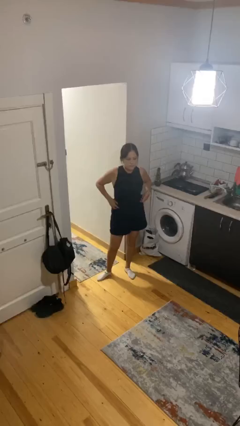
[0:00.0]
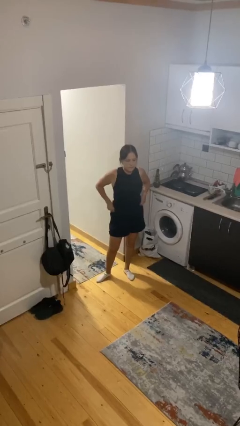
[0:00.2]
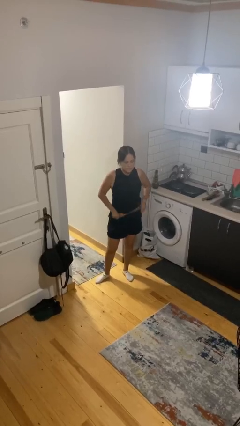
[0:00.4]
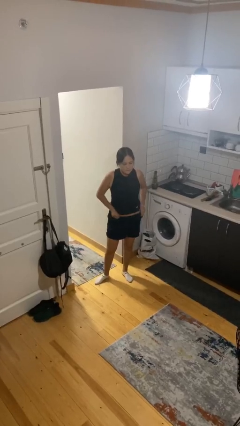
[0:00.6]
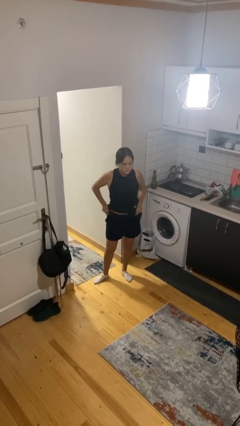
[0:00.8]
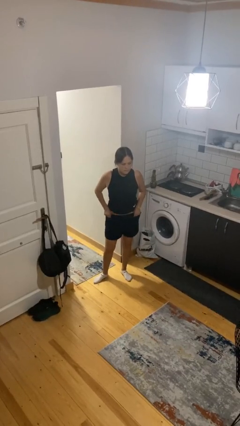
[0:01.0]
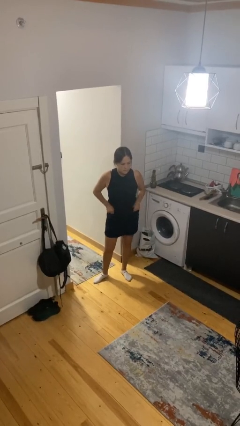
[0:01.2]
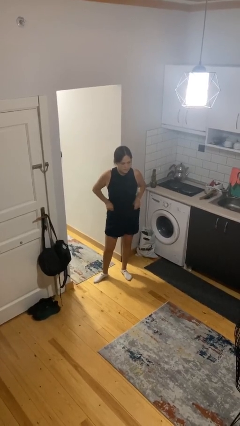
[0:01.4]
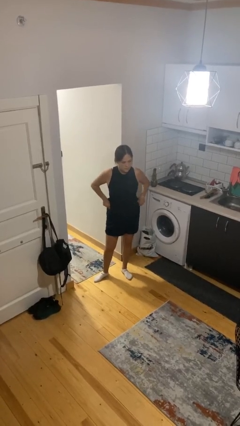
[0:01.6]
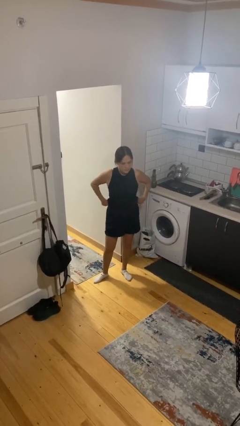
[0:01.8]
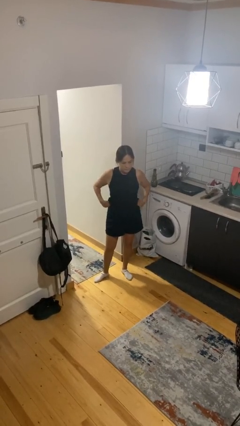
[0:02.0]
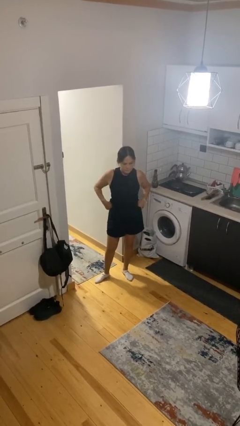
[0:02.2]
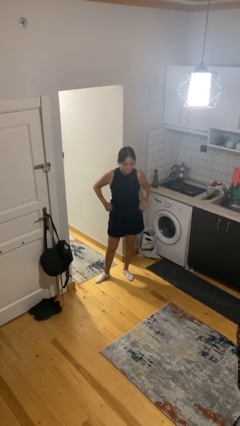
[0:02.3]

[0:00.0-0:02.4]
person hikes up pants

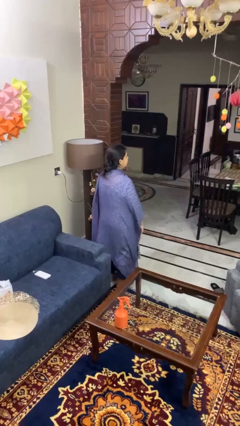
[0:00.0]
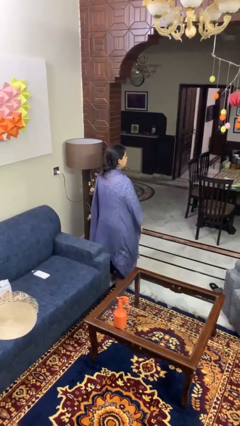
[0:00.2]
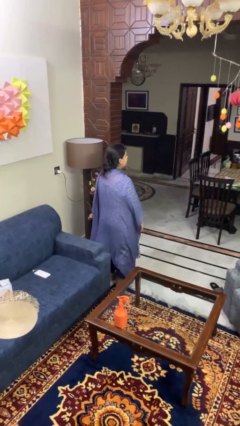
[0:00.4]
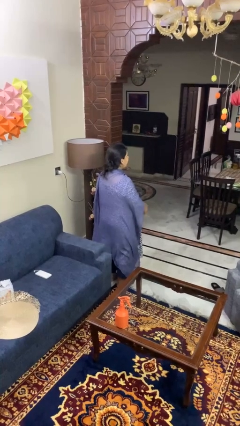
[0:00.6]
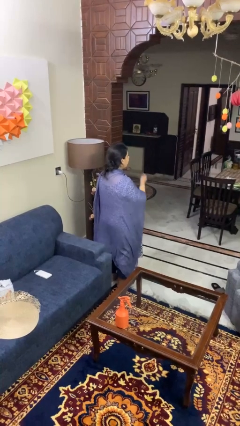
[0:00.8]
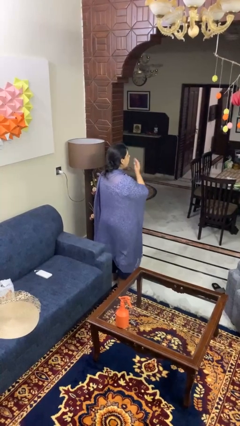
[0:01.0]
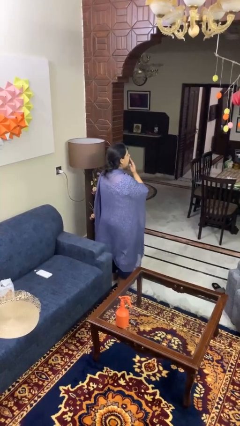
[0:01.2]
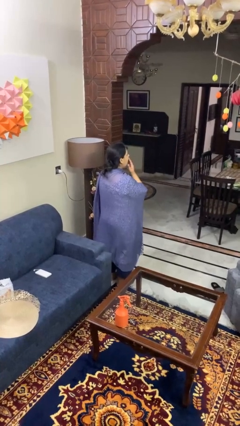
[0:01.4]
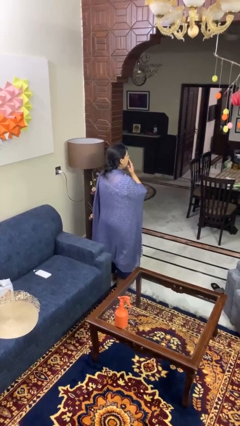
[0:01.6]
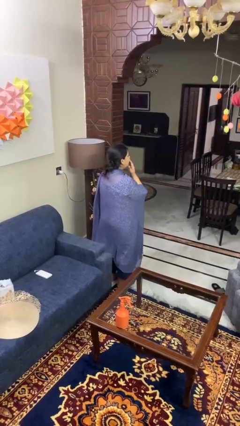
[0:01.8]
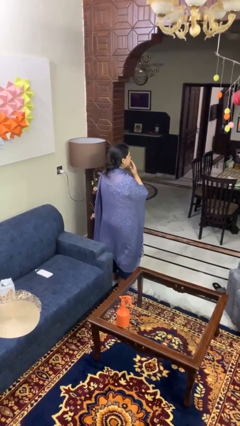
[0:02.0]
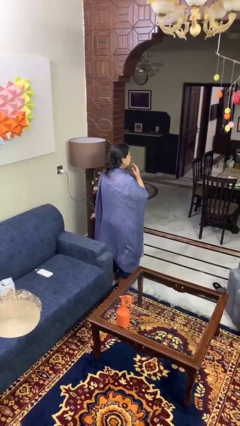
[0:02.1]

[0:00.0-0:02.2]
person yawns

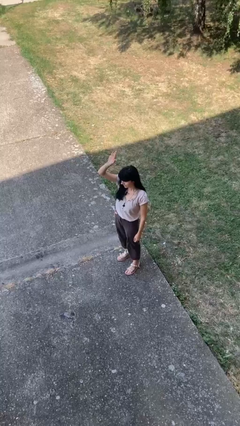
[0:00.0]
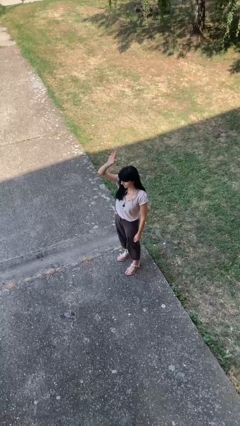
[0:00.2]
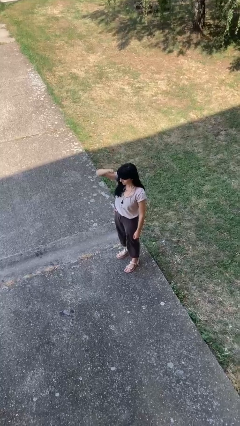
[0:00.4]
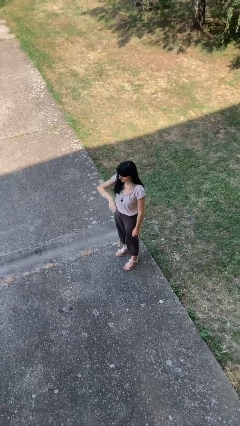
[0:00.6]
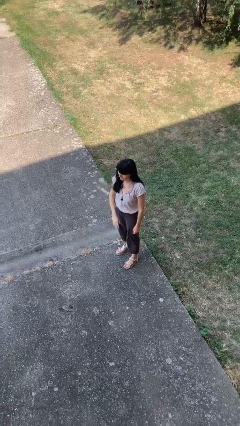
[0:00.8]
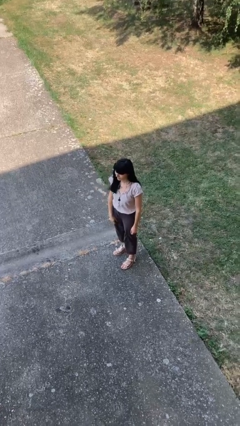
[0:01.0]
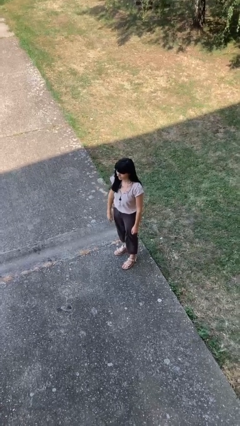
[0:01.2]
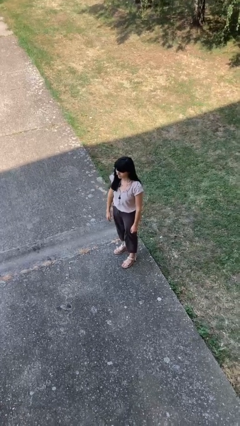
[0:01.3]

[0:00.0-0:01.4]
person gestures lower hand

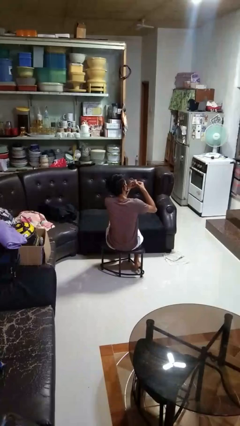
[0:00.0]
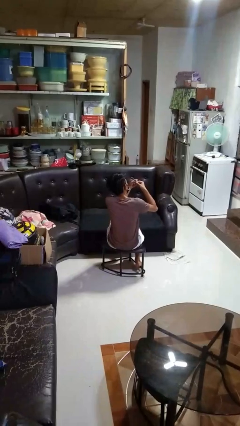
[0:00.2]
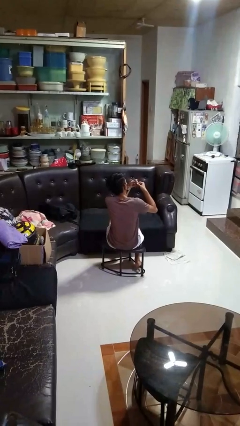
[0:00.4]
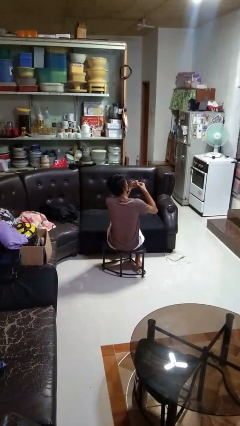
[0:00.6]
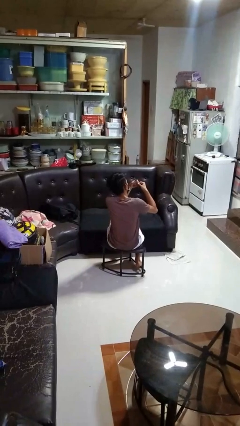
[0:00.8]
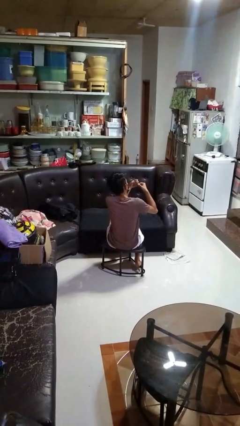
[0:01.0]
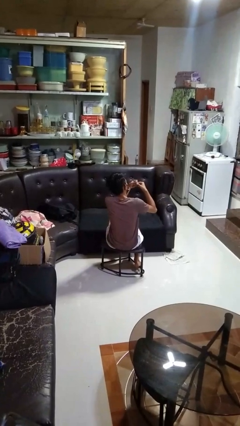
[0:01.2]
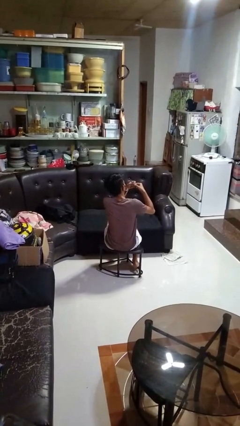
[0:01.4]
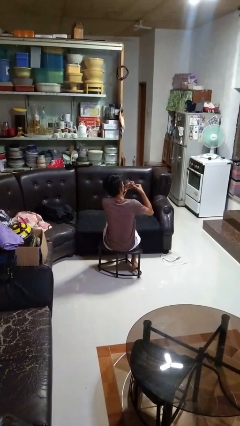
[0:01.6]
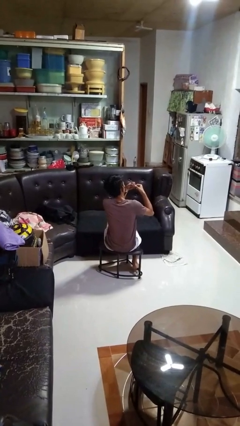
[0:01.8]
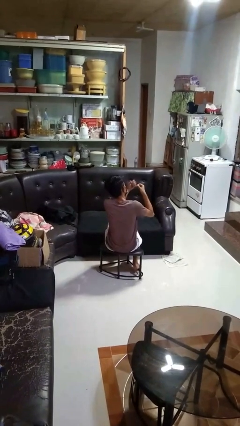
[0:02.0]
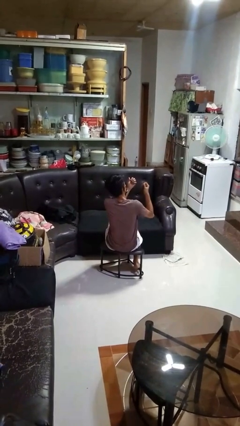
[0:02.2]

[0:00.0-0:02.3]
person files fingernails

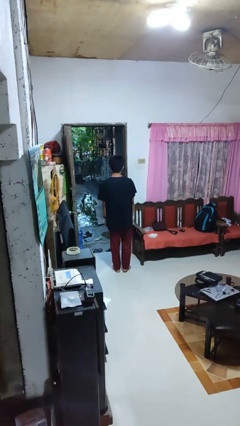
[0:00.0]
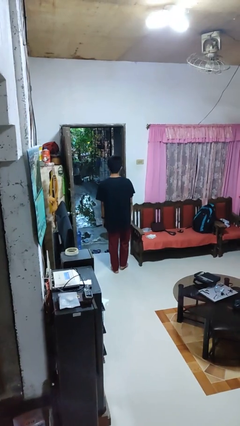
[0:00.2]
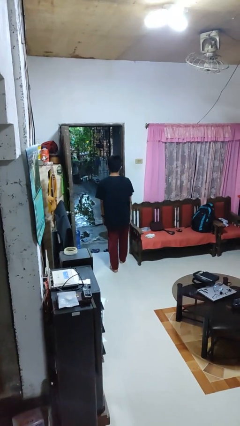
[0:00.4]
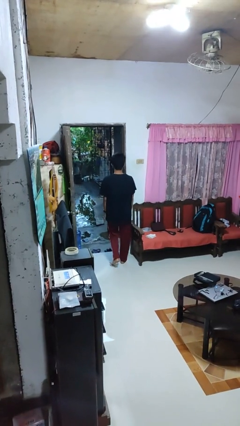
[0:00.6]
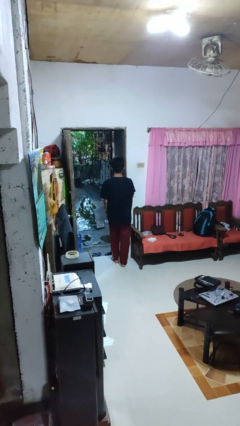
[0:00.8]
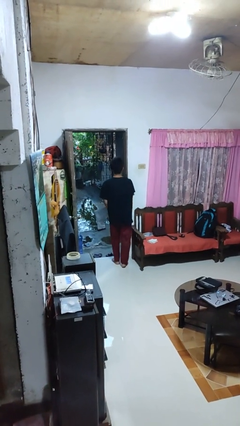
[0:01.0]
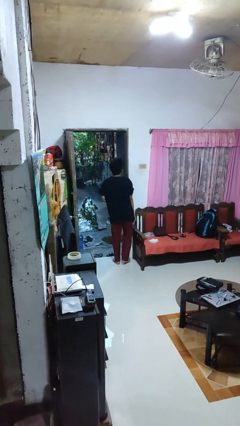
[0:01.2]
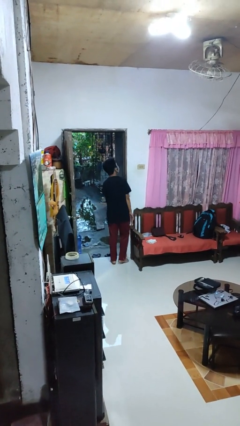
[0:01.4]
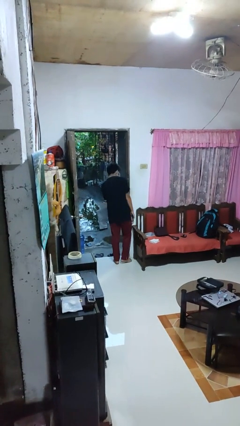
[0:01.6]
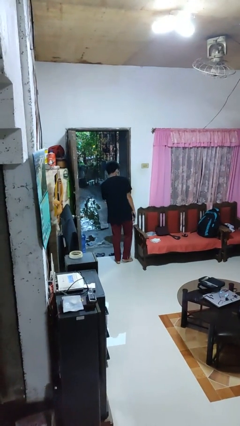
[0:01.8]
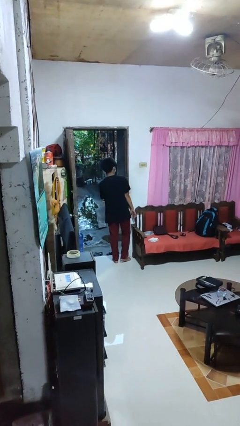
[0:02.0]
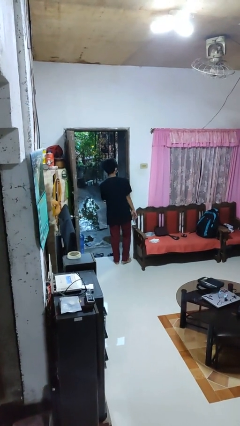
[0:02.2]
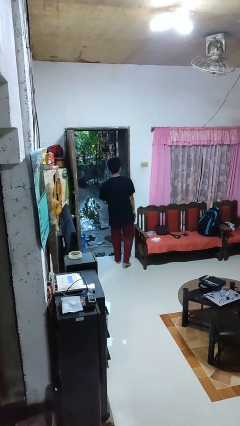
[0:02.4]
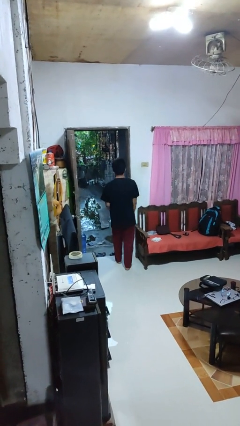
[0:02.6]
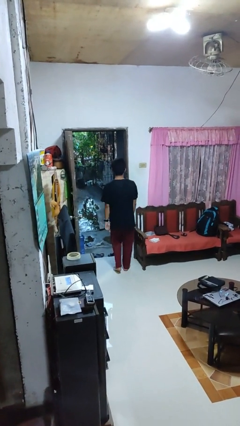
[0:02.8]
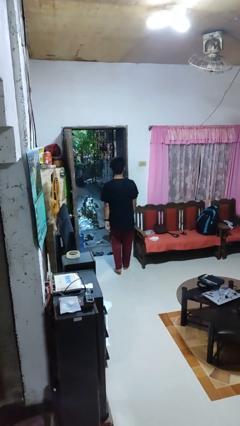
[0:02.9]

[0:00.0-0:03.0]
person bumps into wall

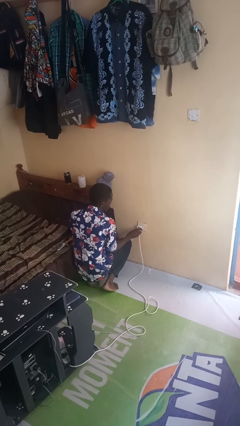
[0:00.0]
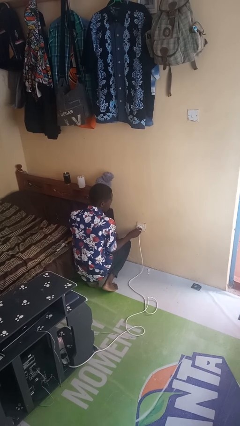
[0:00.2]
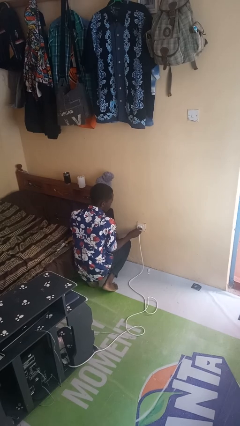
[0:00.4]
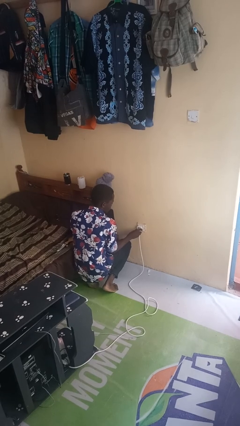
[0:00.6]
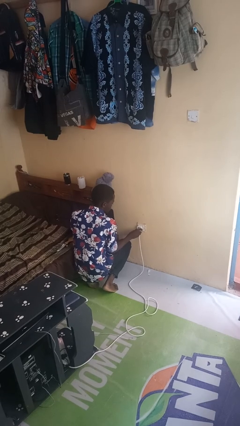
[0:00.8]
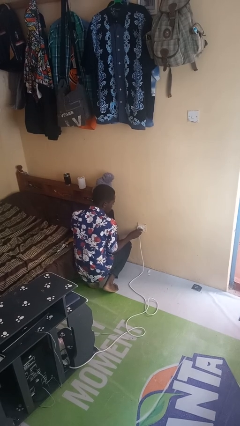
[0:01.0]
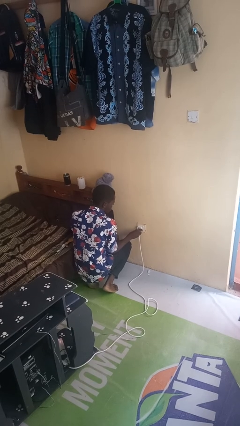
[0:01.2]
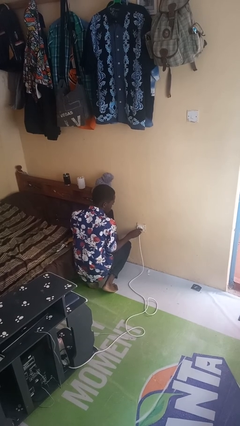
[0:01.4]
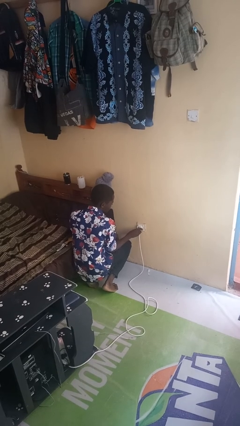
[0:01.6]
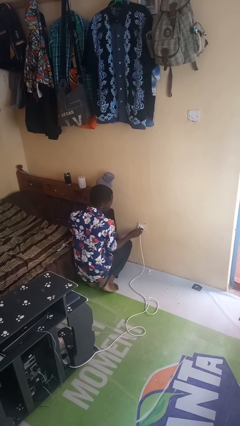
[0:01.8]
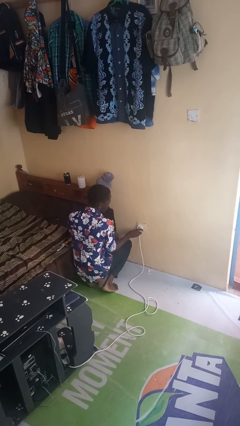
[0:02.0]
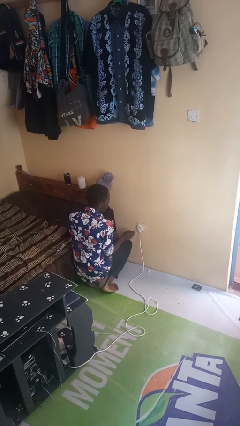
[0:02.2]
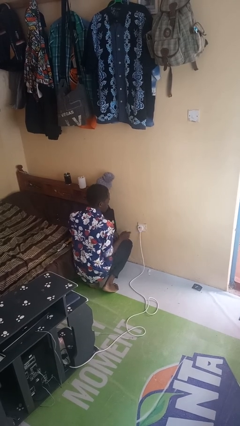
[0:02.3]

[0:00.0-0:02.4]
person plugs into electrical socket

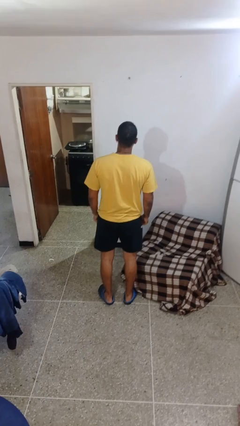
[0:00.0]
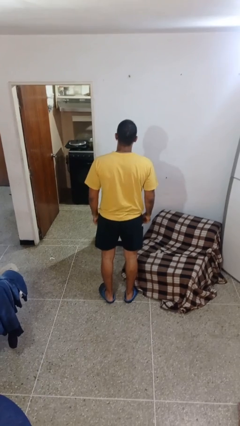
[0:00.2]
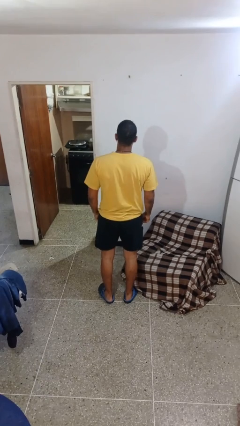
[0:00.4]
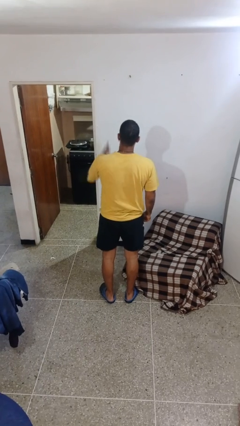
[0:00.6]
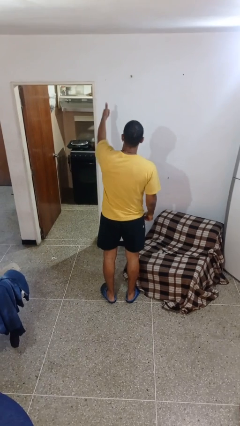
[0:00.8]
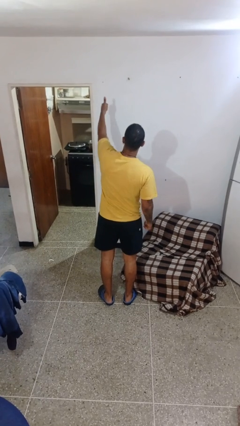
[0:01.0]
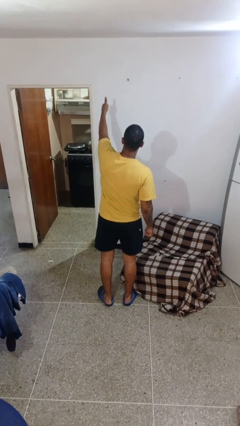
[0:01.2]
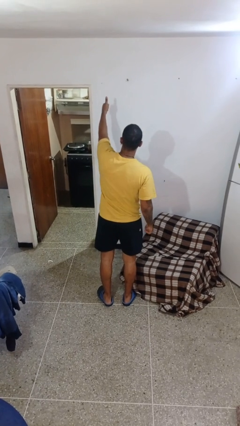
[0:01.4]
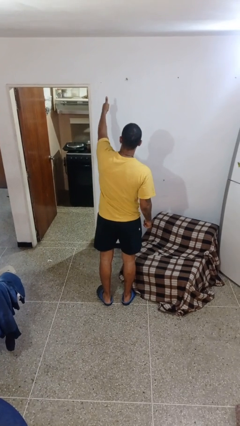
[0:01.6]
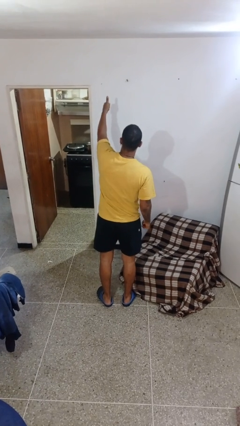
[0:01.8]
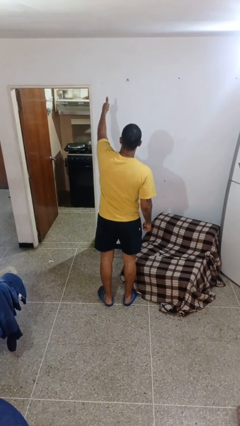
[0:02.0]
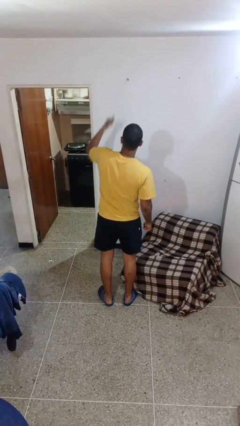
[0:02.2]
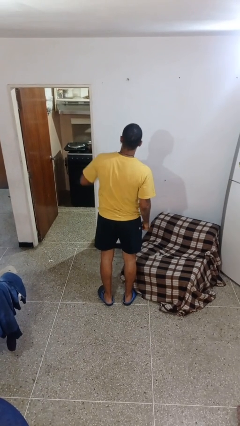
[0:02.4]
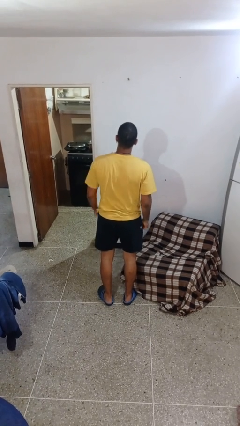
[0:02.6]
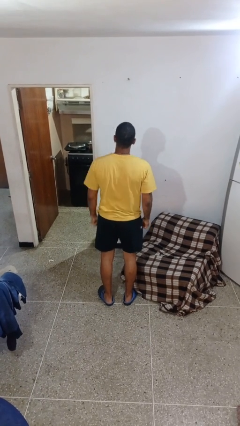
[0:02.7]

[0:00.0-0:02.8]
person gestures thumbs up

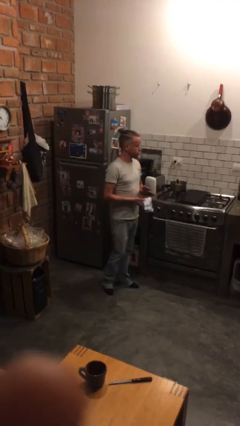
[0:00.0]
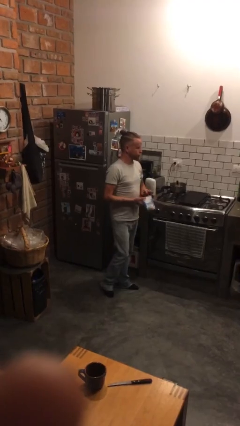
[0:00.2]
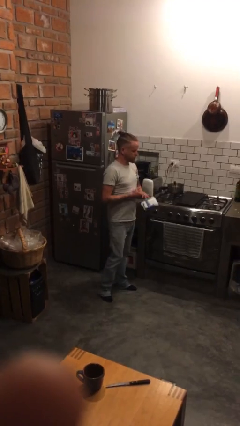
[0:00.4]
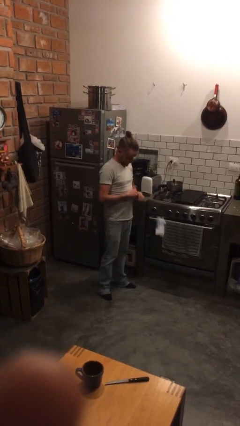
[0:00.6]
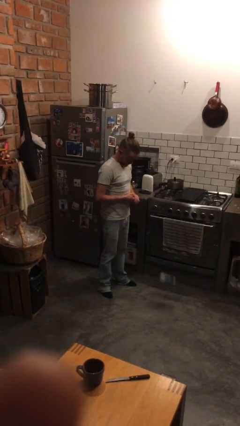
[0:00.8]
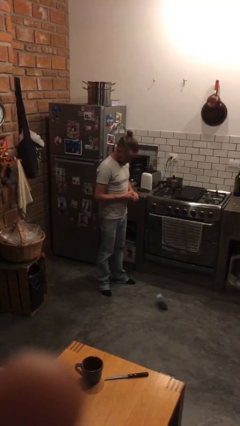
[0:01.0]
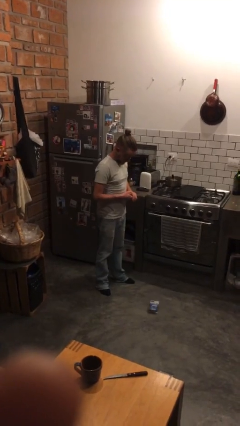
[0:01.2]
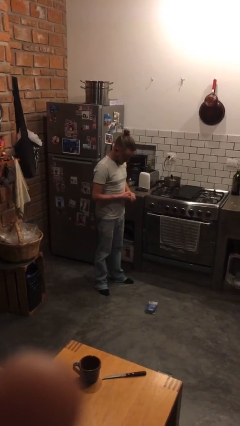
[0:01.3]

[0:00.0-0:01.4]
person drops object
